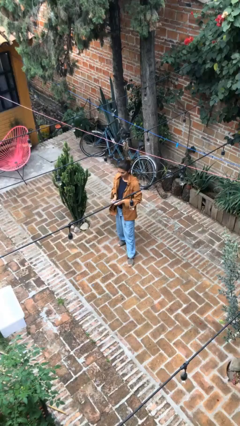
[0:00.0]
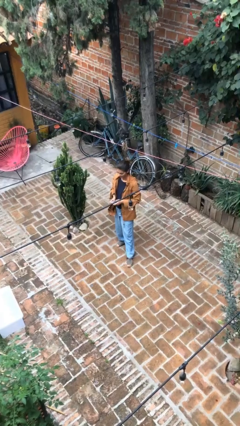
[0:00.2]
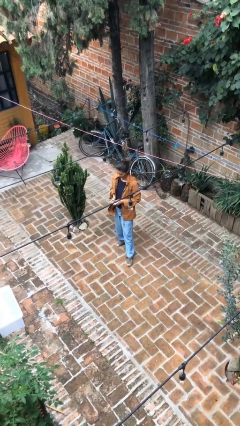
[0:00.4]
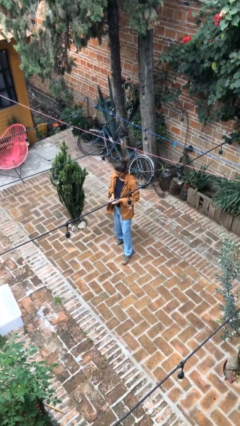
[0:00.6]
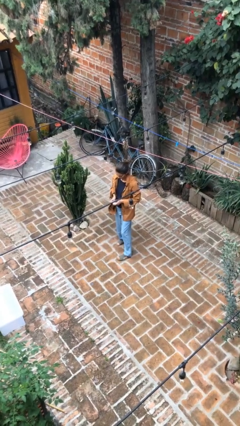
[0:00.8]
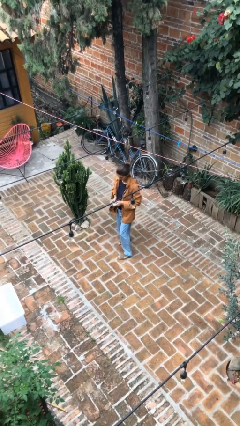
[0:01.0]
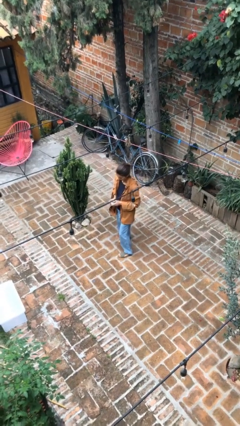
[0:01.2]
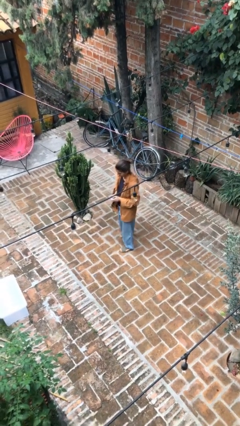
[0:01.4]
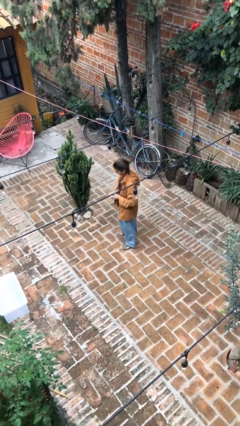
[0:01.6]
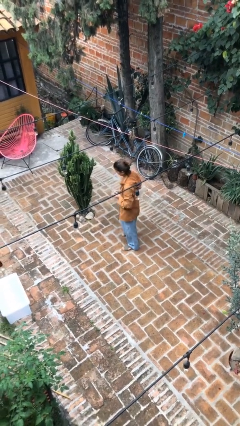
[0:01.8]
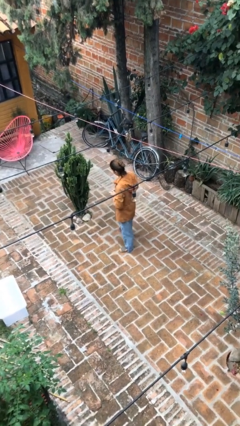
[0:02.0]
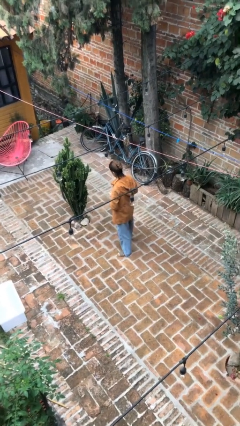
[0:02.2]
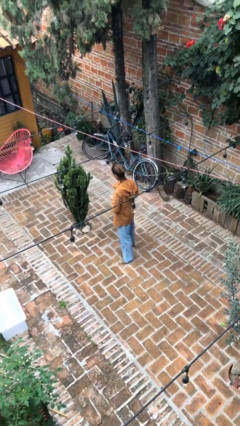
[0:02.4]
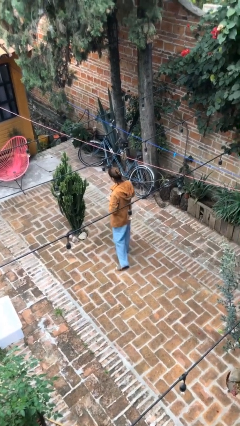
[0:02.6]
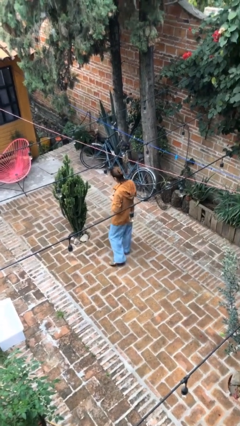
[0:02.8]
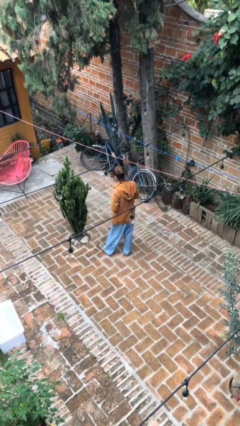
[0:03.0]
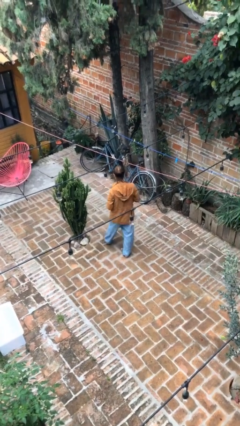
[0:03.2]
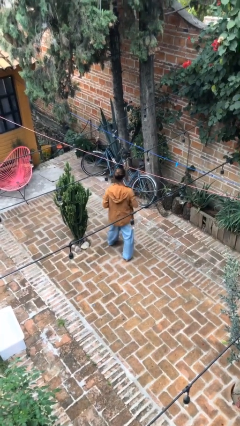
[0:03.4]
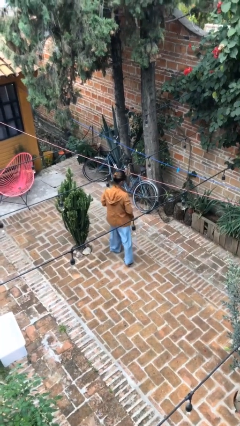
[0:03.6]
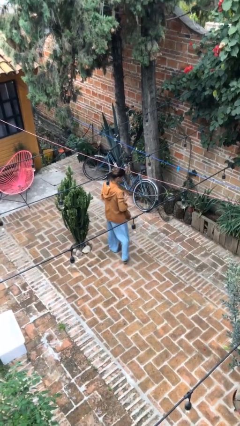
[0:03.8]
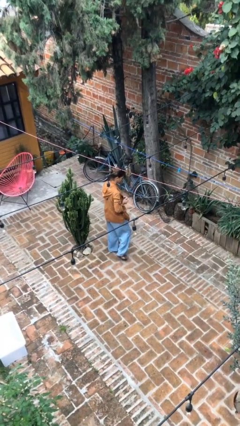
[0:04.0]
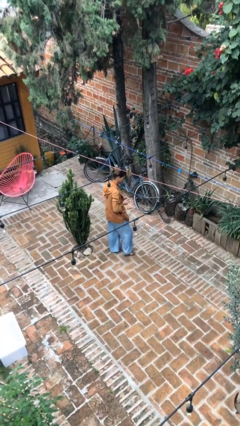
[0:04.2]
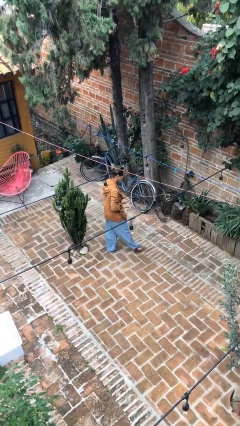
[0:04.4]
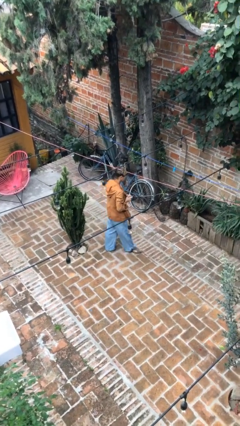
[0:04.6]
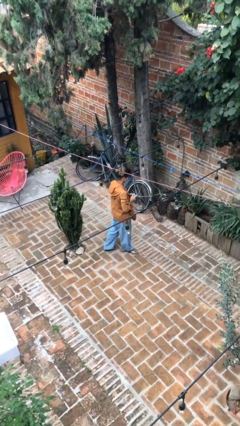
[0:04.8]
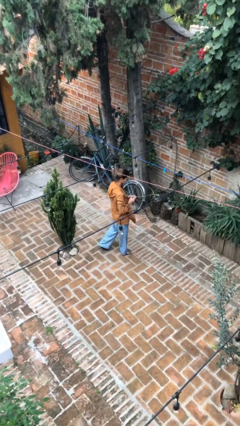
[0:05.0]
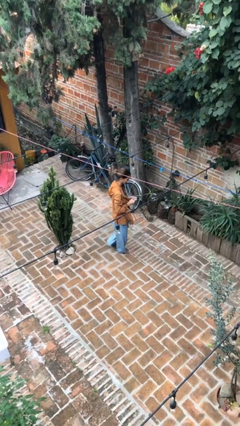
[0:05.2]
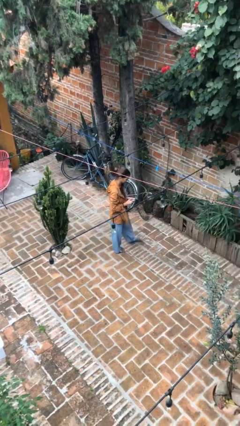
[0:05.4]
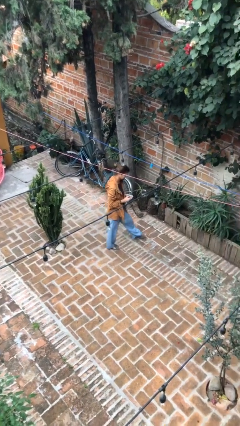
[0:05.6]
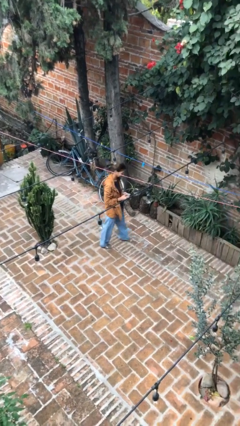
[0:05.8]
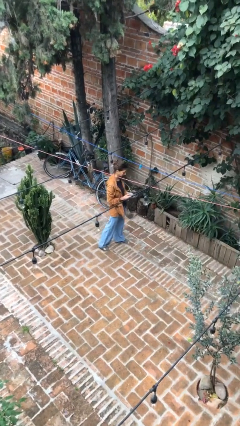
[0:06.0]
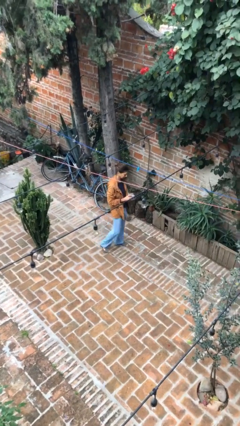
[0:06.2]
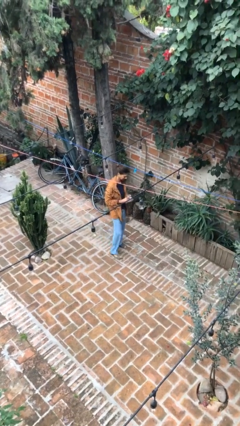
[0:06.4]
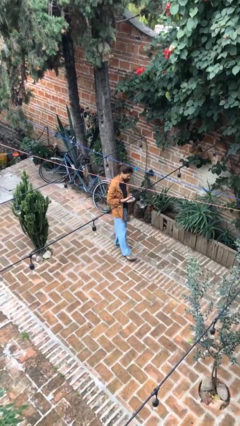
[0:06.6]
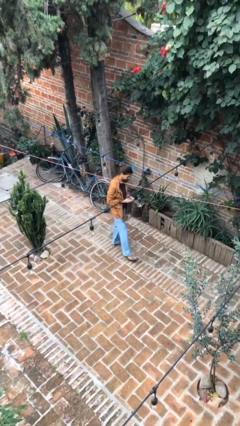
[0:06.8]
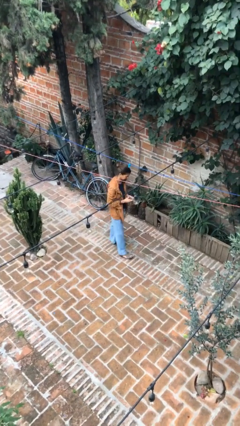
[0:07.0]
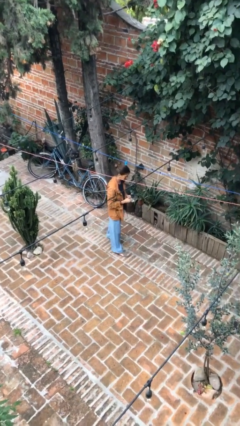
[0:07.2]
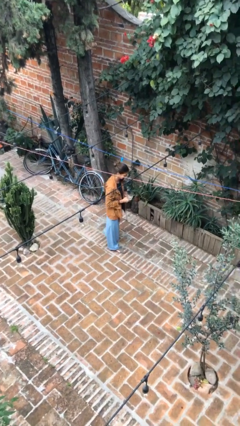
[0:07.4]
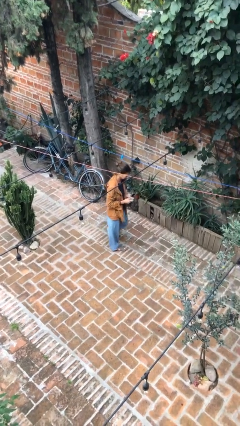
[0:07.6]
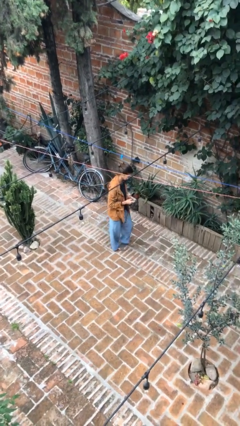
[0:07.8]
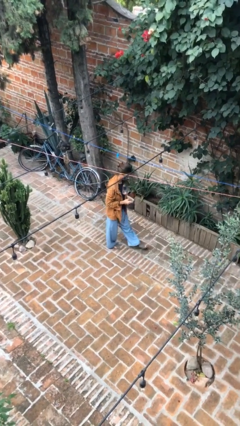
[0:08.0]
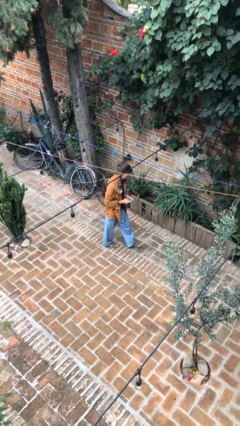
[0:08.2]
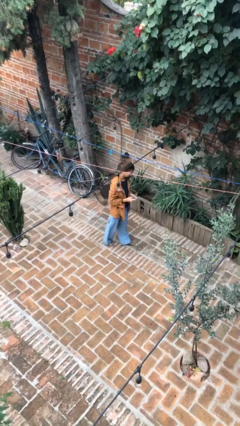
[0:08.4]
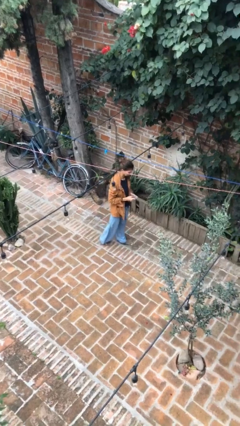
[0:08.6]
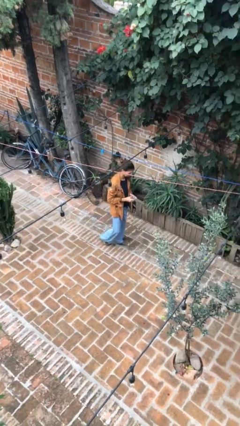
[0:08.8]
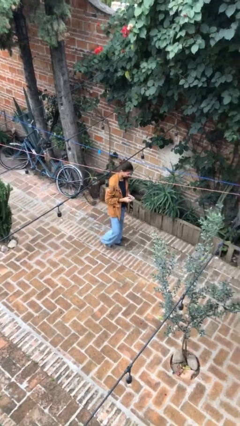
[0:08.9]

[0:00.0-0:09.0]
person texts on phone

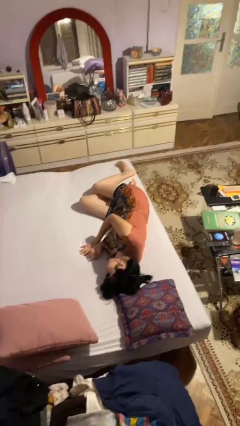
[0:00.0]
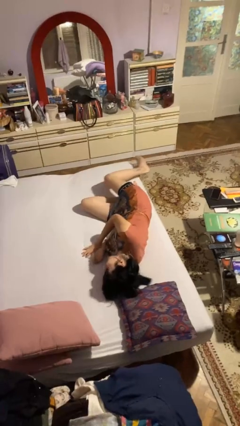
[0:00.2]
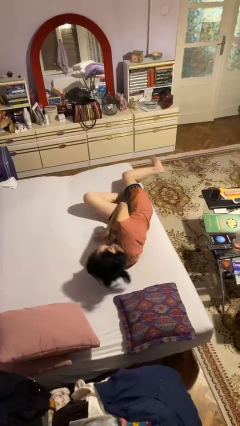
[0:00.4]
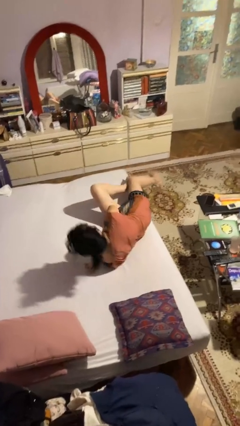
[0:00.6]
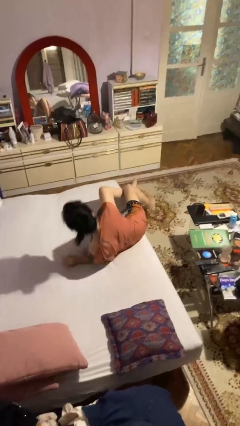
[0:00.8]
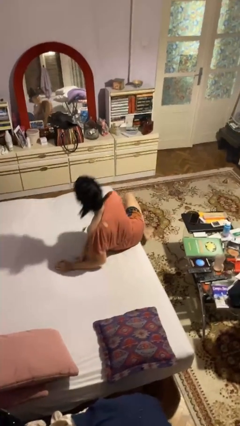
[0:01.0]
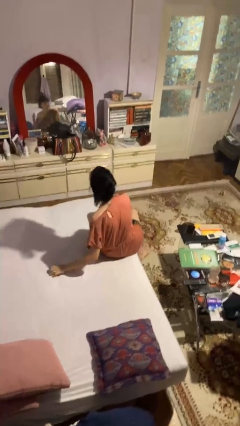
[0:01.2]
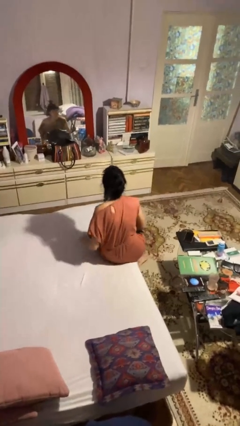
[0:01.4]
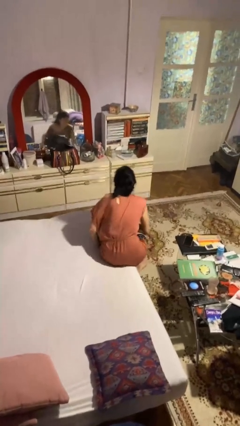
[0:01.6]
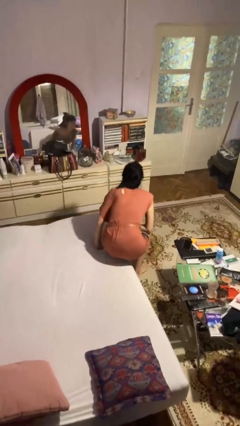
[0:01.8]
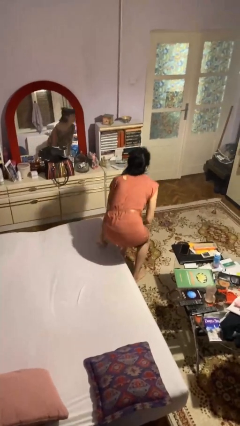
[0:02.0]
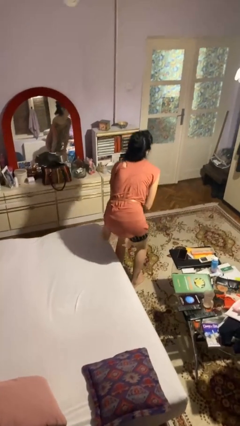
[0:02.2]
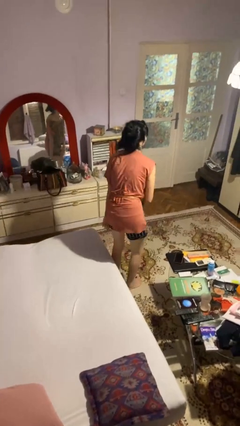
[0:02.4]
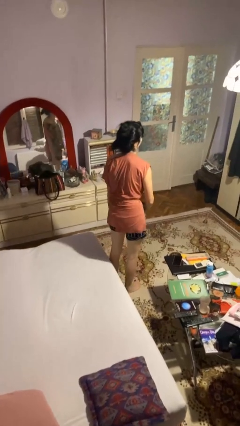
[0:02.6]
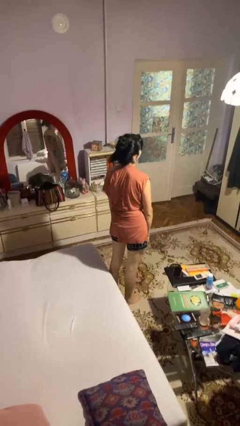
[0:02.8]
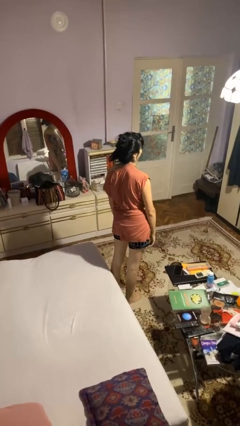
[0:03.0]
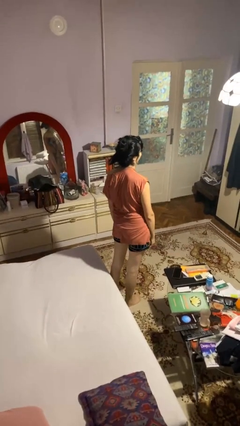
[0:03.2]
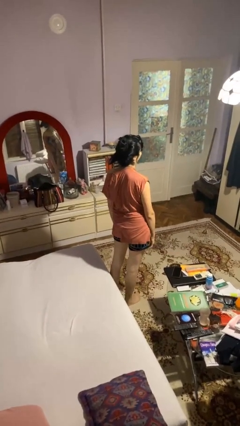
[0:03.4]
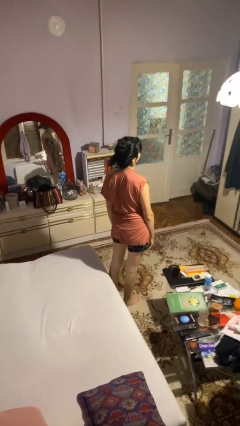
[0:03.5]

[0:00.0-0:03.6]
person stands up

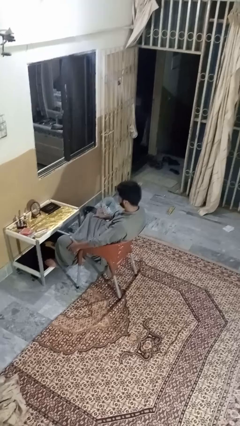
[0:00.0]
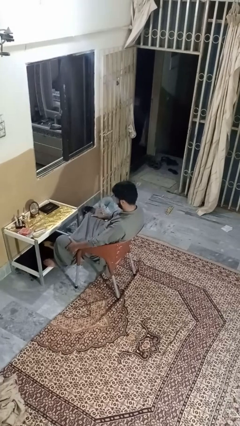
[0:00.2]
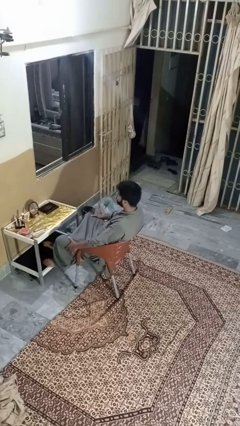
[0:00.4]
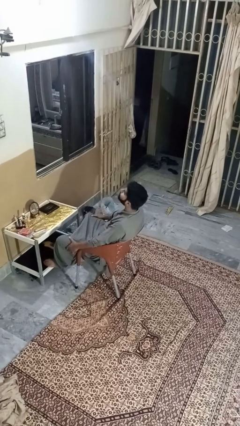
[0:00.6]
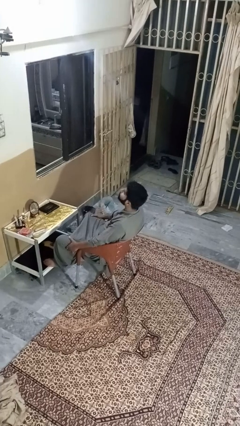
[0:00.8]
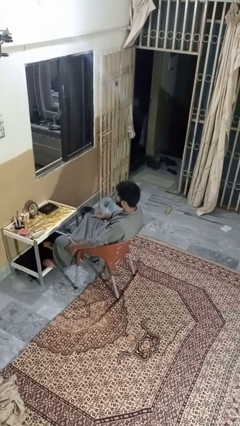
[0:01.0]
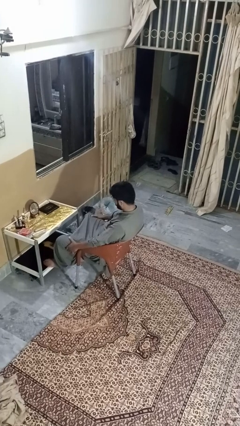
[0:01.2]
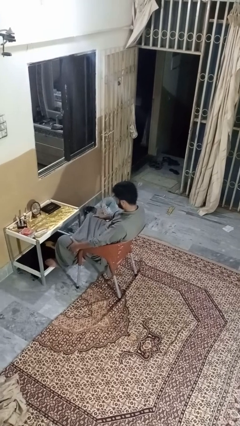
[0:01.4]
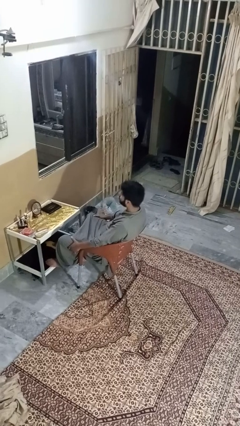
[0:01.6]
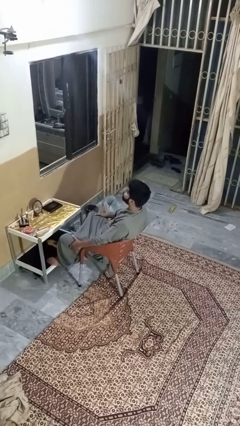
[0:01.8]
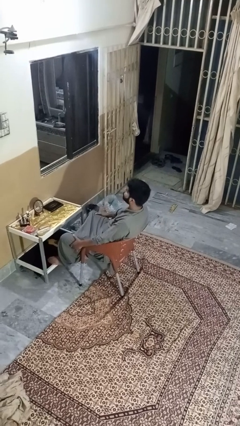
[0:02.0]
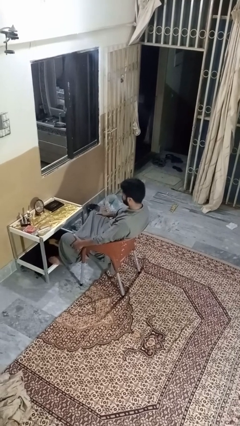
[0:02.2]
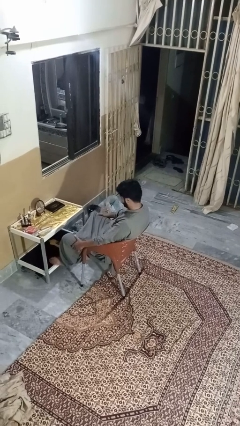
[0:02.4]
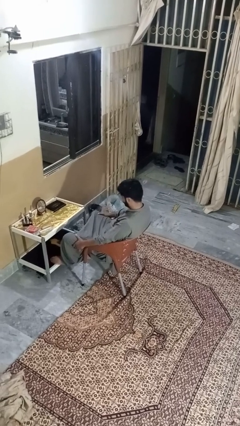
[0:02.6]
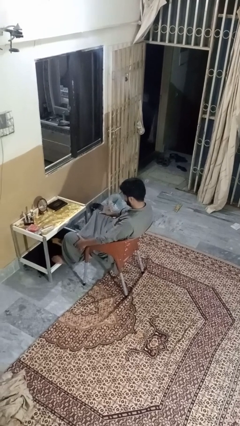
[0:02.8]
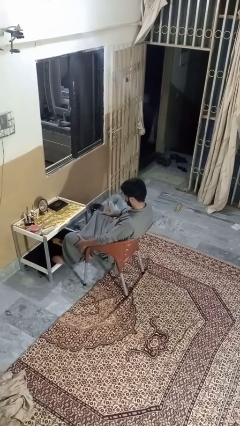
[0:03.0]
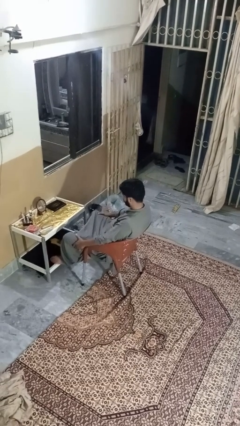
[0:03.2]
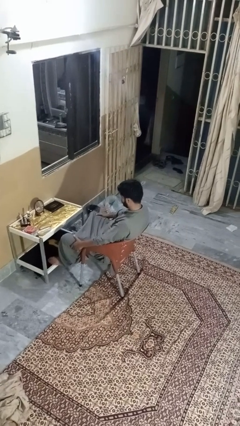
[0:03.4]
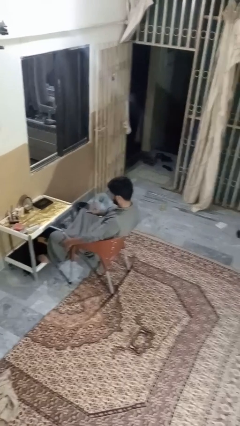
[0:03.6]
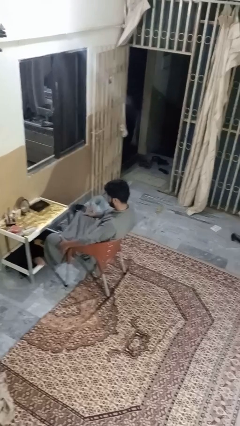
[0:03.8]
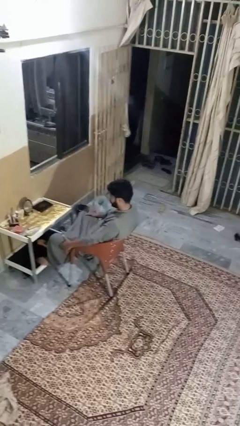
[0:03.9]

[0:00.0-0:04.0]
person nods head

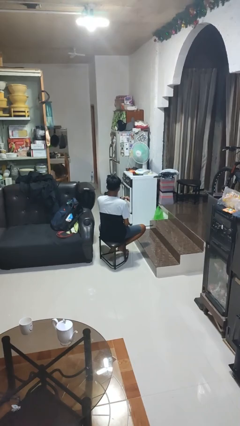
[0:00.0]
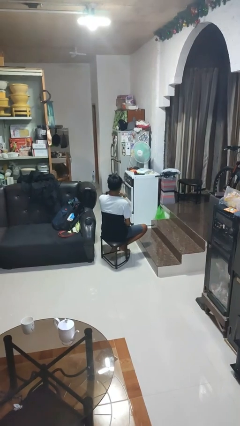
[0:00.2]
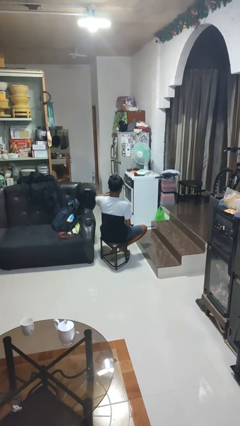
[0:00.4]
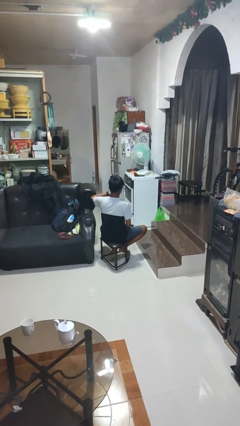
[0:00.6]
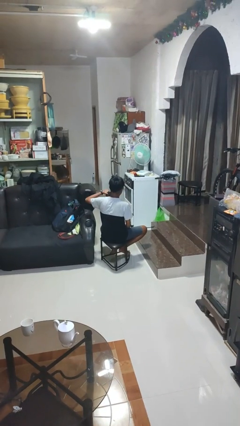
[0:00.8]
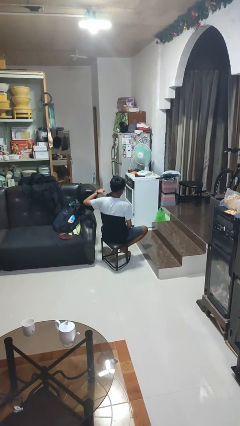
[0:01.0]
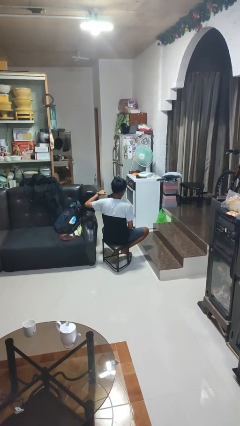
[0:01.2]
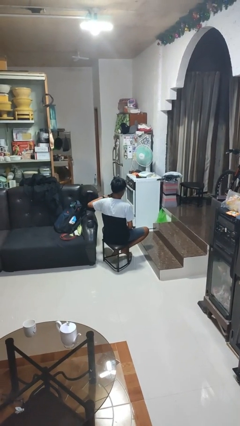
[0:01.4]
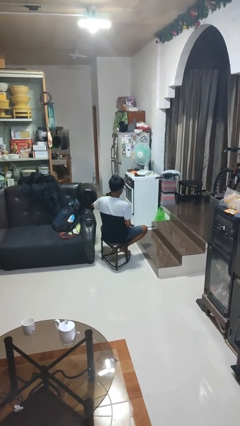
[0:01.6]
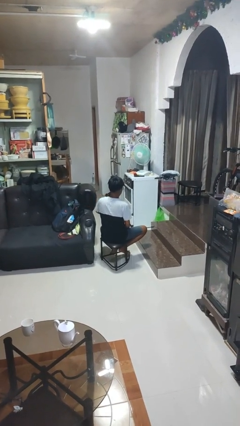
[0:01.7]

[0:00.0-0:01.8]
person gestures cut
